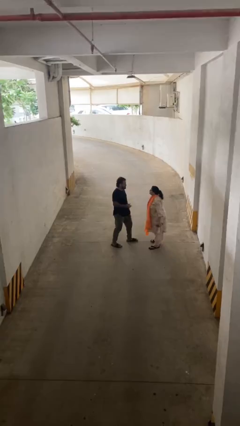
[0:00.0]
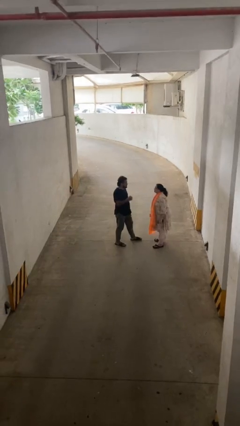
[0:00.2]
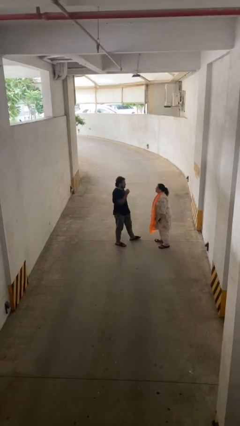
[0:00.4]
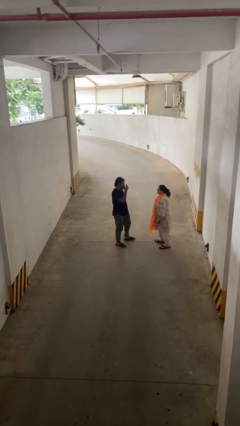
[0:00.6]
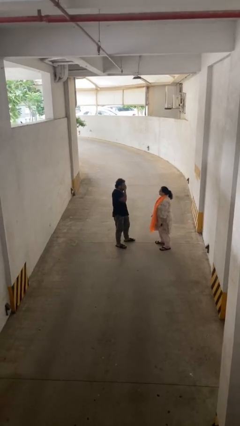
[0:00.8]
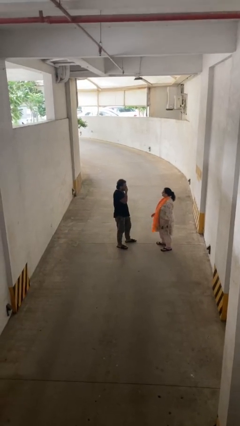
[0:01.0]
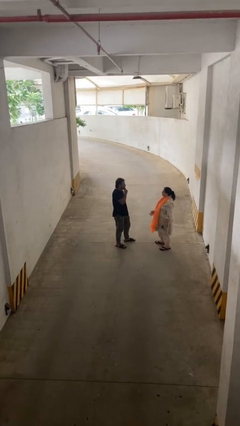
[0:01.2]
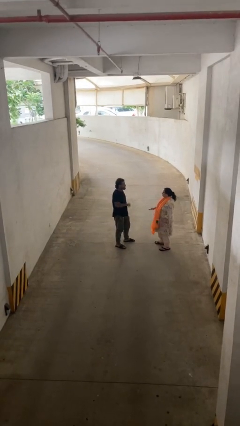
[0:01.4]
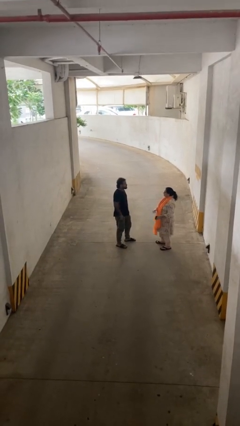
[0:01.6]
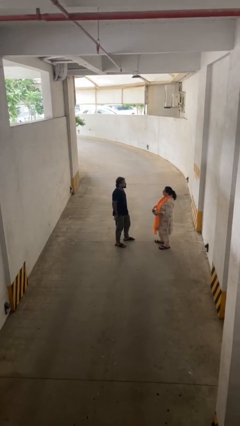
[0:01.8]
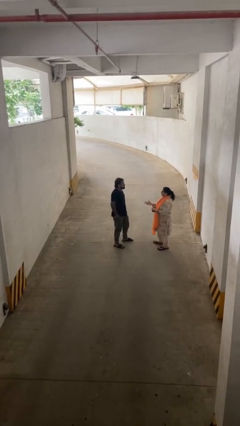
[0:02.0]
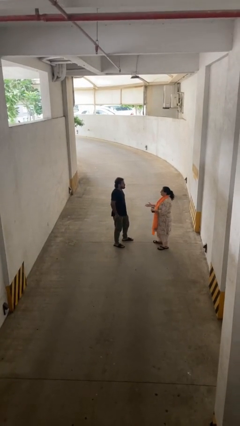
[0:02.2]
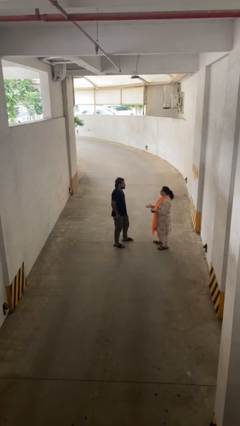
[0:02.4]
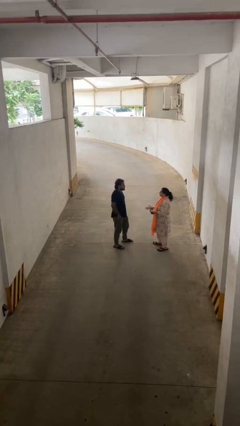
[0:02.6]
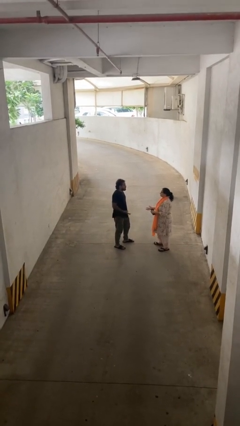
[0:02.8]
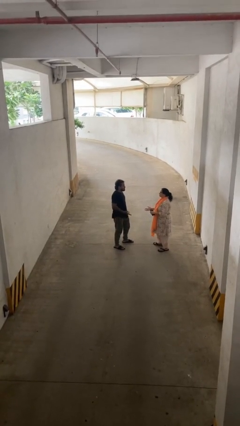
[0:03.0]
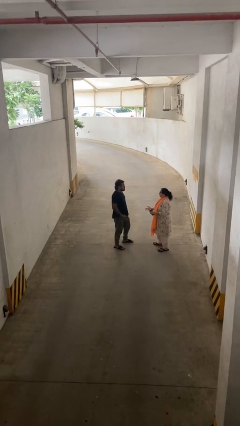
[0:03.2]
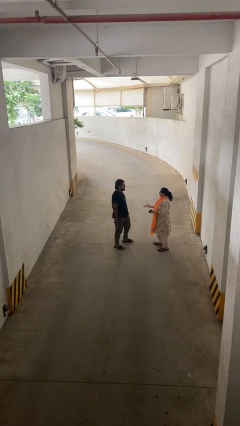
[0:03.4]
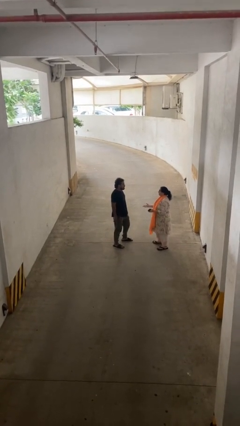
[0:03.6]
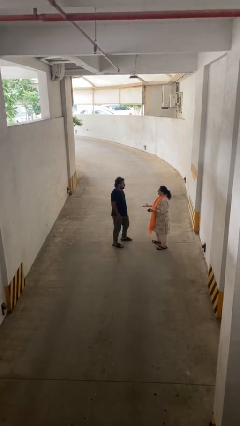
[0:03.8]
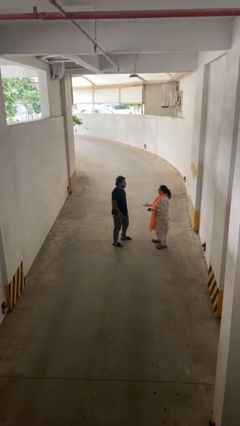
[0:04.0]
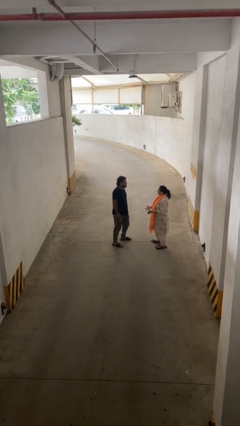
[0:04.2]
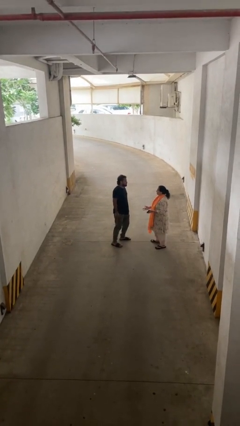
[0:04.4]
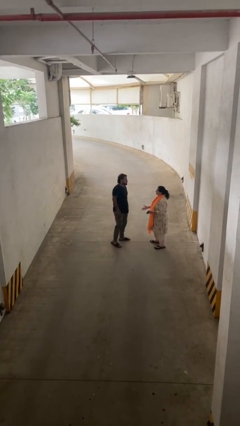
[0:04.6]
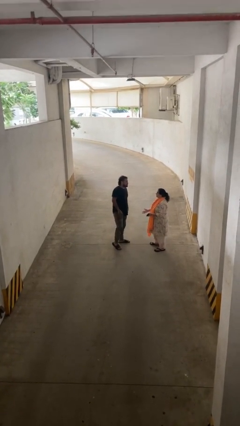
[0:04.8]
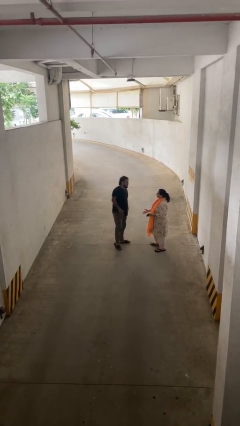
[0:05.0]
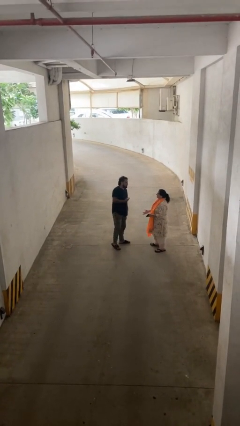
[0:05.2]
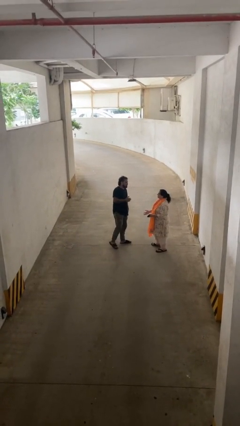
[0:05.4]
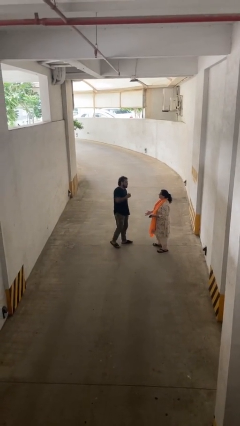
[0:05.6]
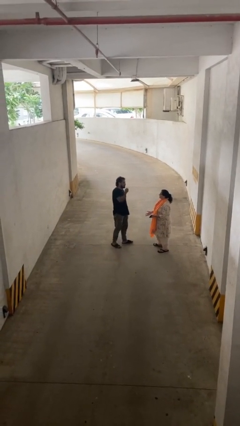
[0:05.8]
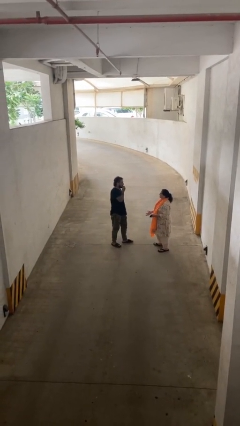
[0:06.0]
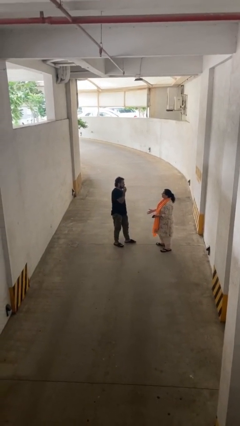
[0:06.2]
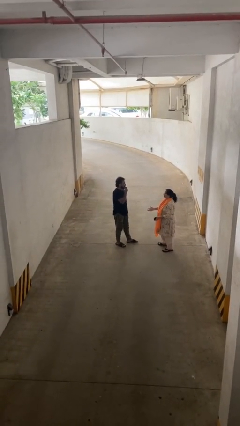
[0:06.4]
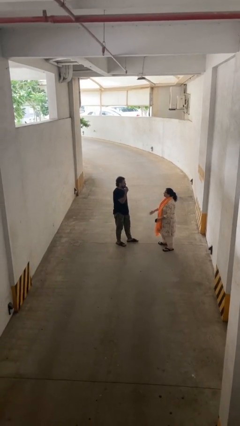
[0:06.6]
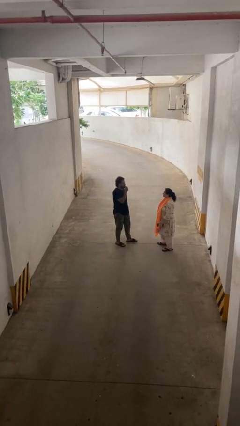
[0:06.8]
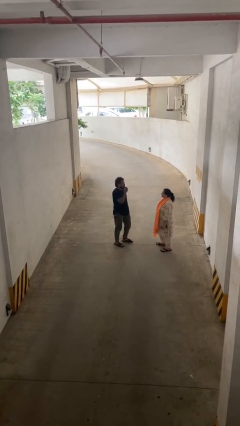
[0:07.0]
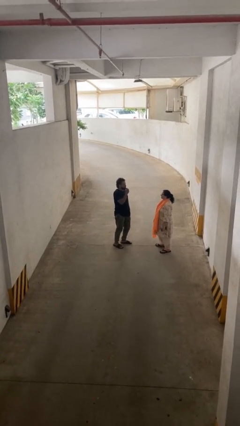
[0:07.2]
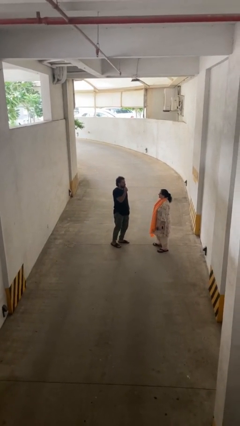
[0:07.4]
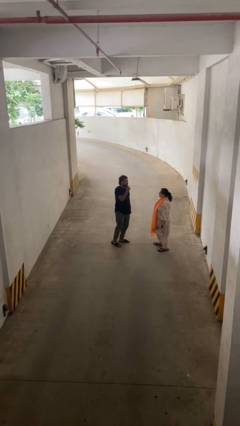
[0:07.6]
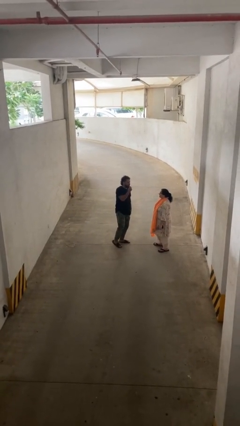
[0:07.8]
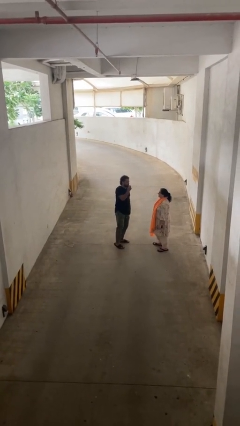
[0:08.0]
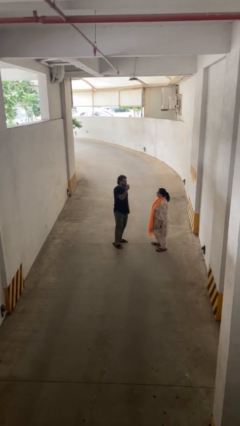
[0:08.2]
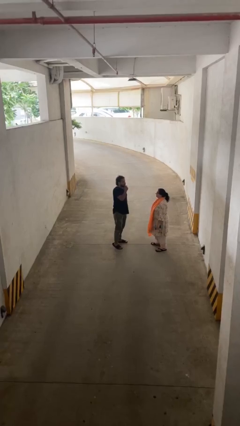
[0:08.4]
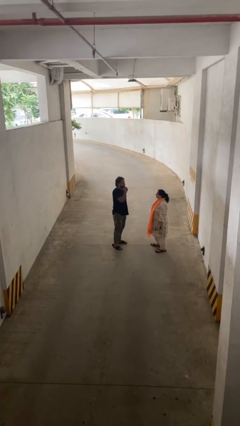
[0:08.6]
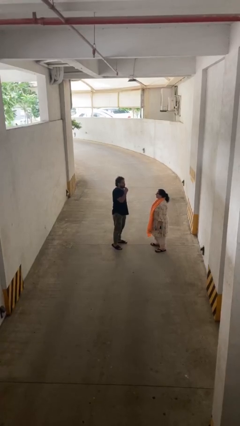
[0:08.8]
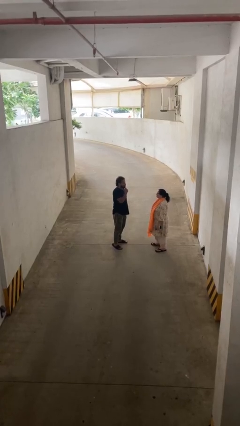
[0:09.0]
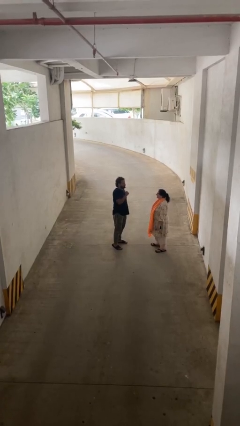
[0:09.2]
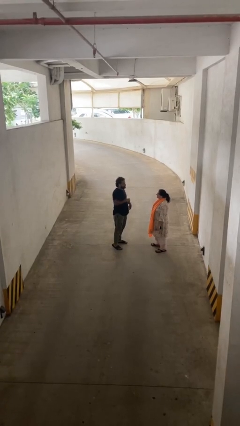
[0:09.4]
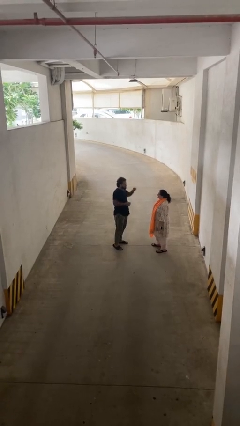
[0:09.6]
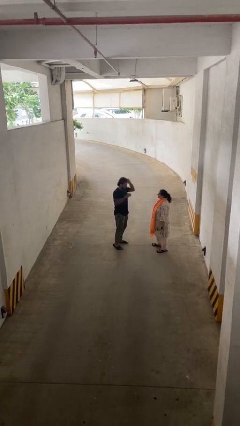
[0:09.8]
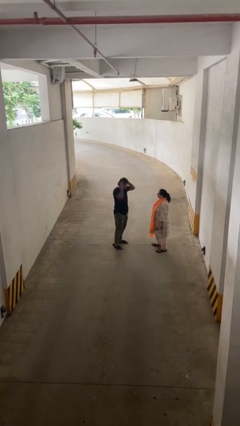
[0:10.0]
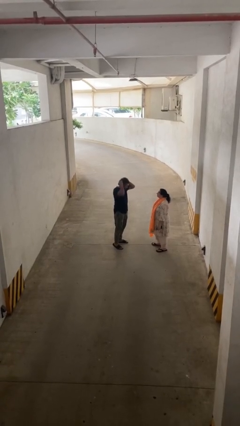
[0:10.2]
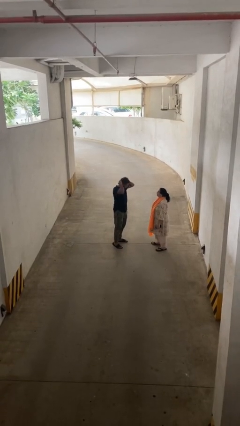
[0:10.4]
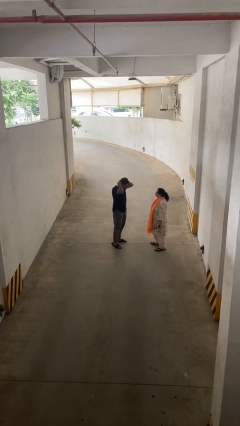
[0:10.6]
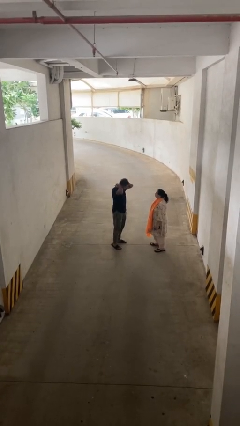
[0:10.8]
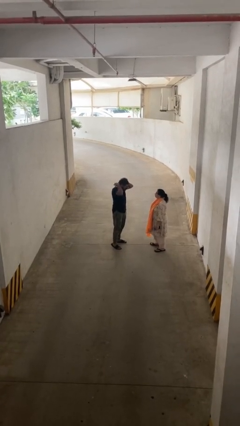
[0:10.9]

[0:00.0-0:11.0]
person talks to person

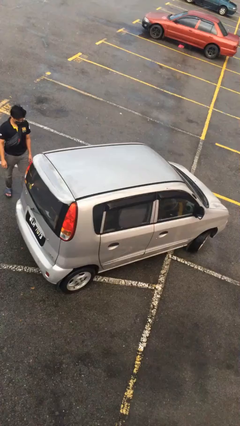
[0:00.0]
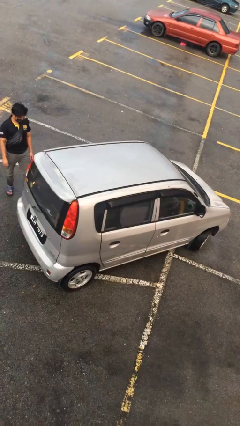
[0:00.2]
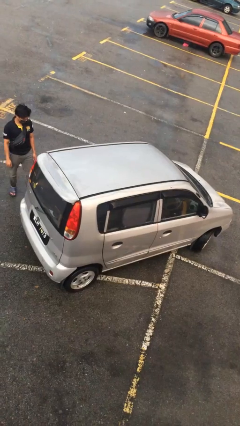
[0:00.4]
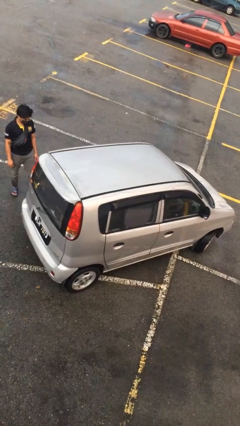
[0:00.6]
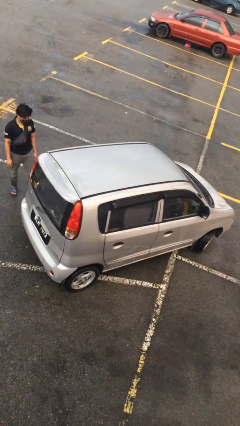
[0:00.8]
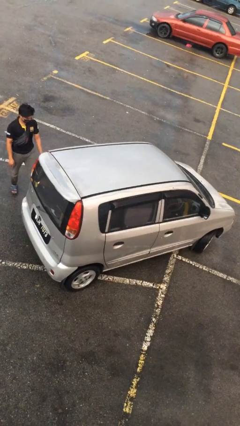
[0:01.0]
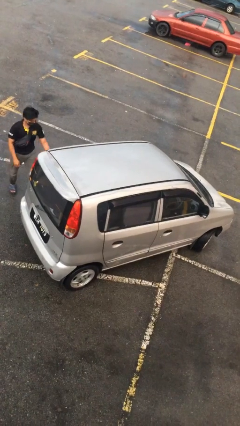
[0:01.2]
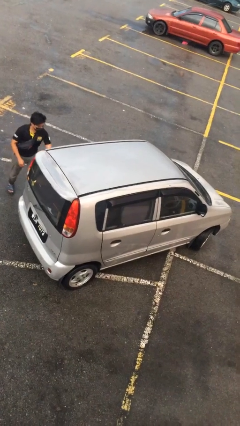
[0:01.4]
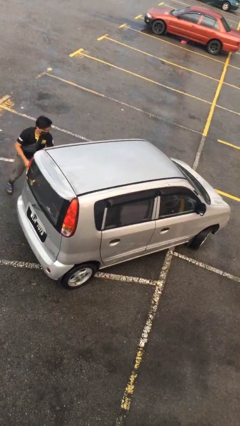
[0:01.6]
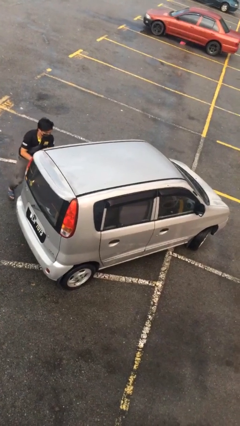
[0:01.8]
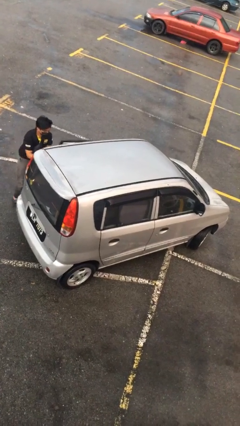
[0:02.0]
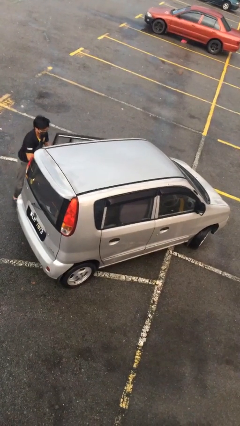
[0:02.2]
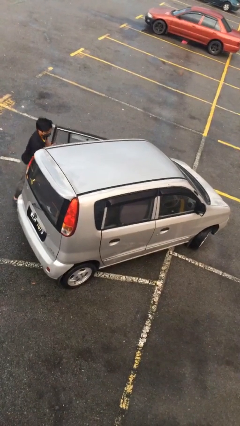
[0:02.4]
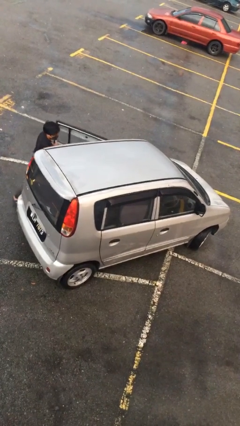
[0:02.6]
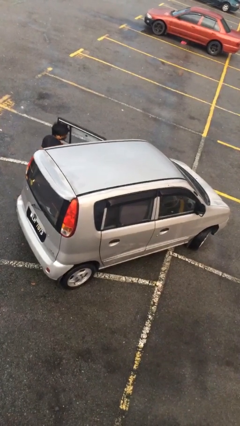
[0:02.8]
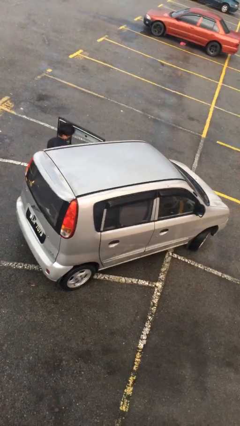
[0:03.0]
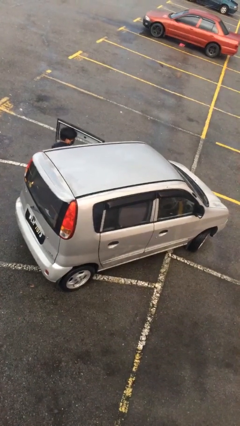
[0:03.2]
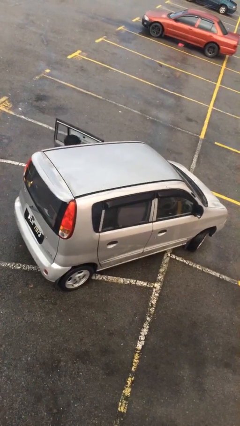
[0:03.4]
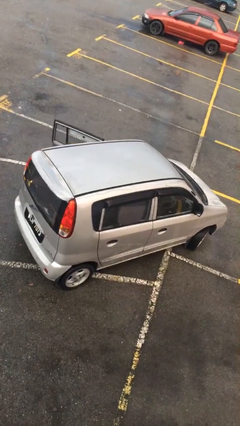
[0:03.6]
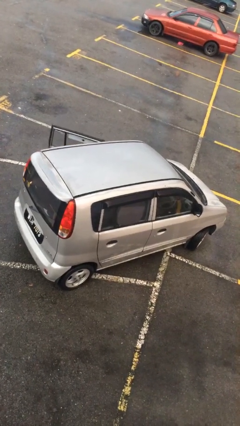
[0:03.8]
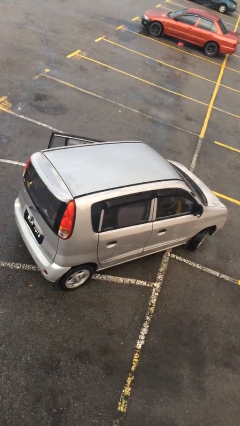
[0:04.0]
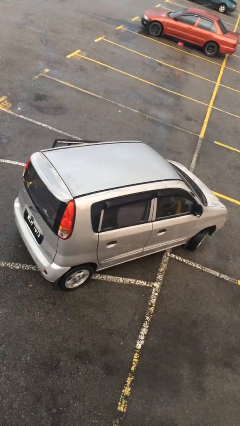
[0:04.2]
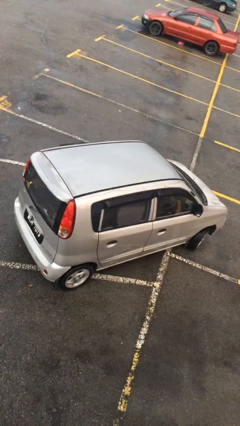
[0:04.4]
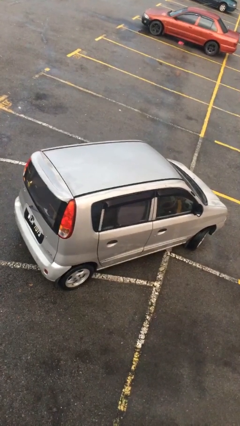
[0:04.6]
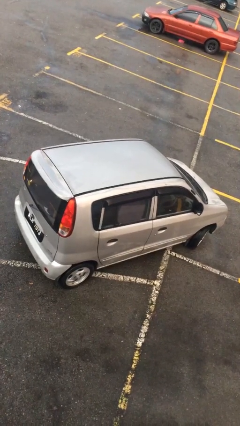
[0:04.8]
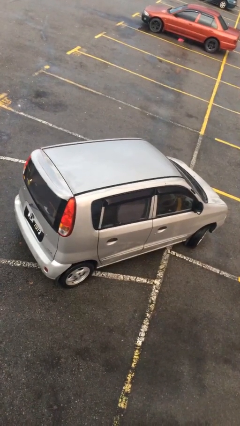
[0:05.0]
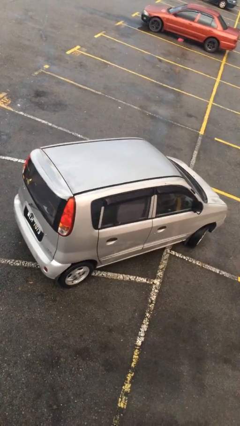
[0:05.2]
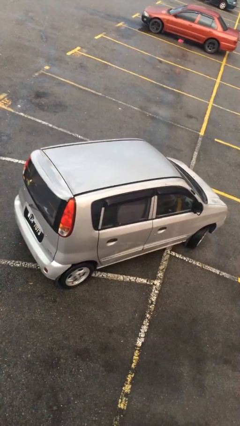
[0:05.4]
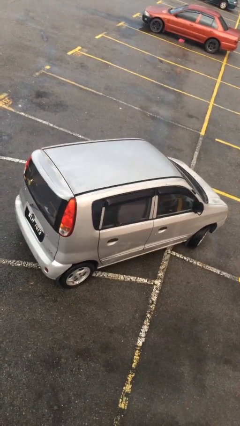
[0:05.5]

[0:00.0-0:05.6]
car picks up person

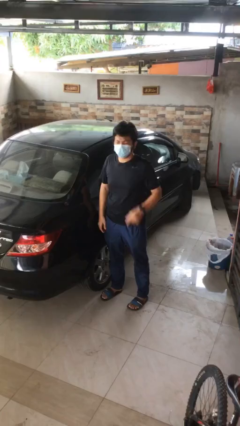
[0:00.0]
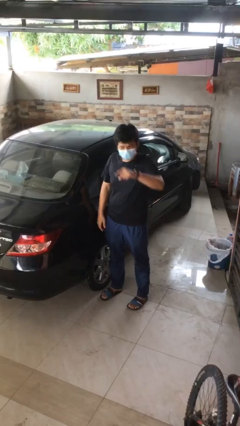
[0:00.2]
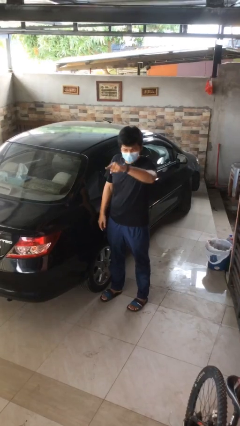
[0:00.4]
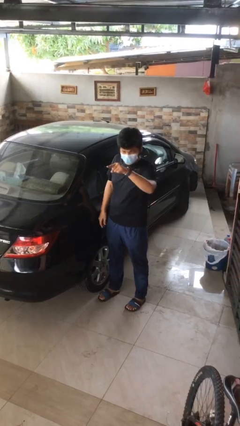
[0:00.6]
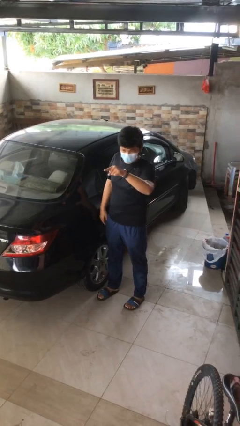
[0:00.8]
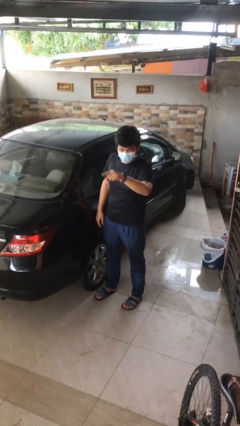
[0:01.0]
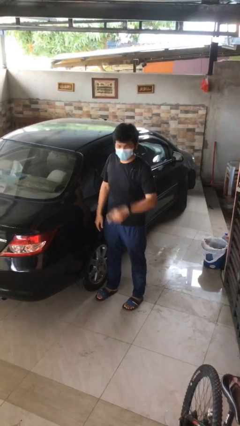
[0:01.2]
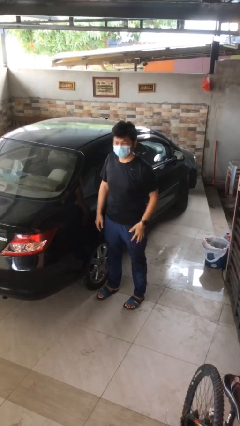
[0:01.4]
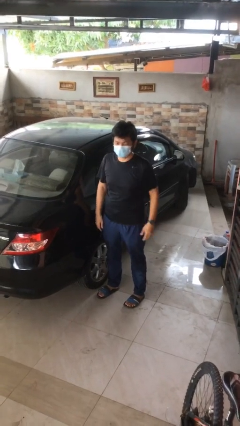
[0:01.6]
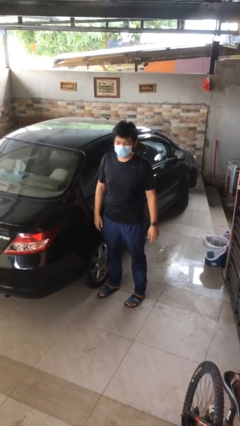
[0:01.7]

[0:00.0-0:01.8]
person points at person
